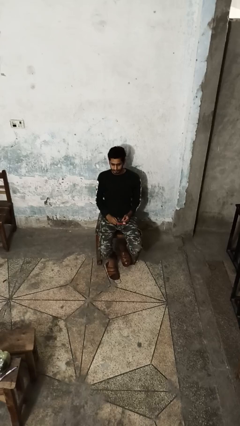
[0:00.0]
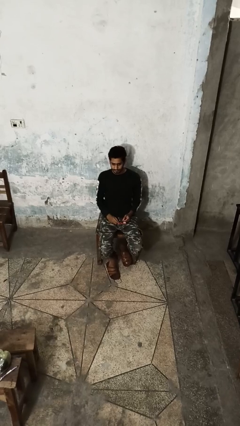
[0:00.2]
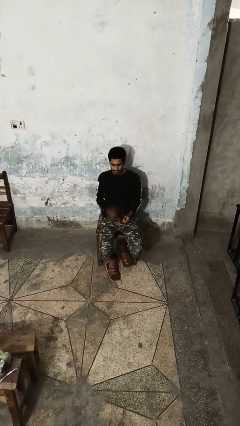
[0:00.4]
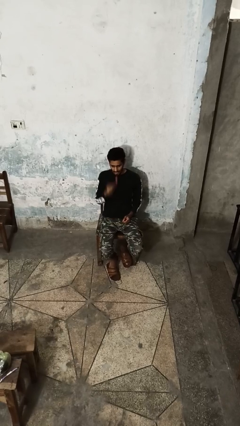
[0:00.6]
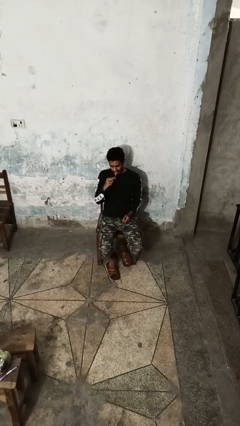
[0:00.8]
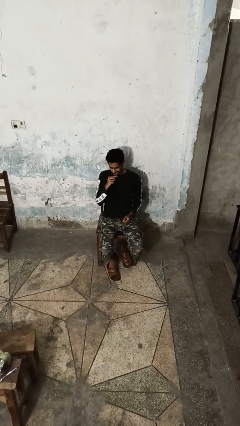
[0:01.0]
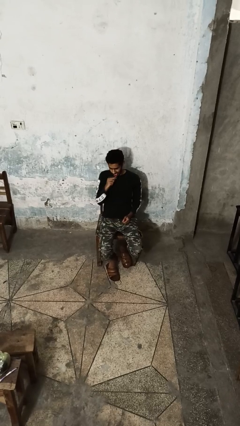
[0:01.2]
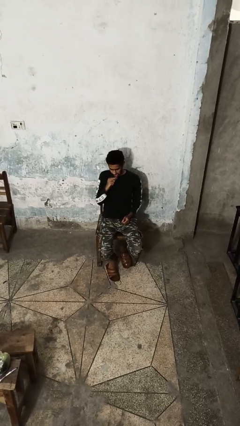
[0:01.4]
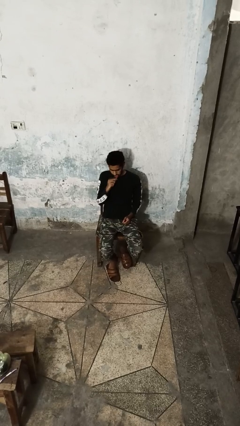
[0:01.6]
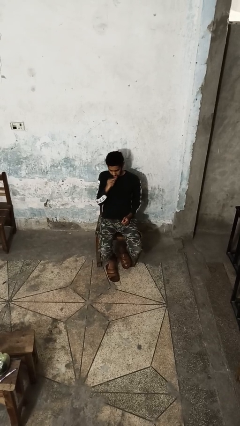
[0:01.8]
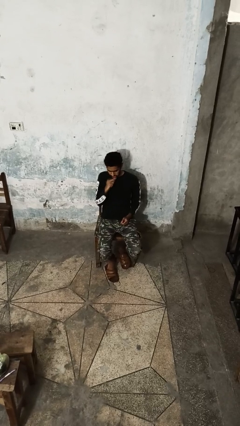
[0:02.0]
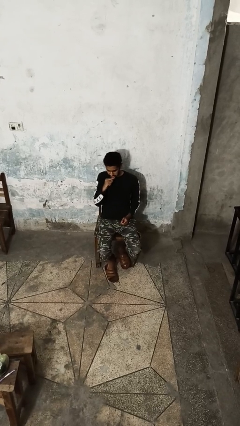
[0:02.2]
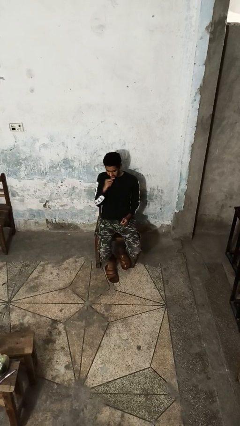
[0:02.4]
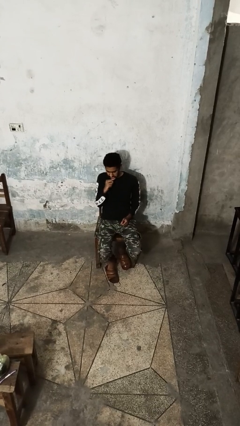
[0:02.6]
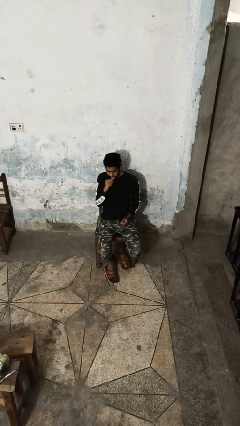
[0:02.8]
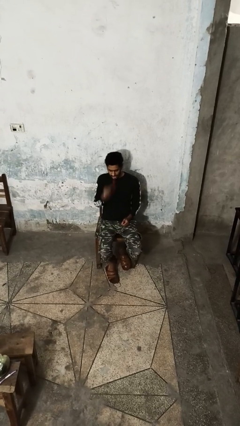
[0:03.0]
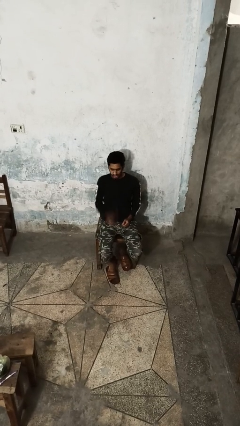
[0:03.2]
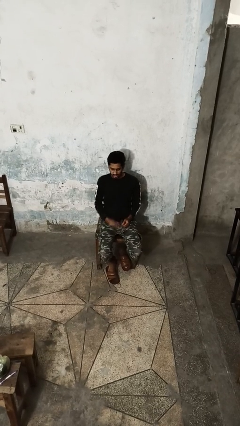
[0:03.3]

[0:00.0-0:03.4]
person brushes teeth

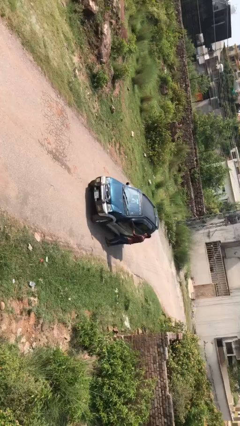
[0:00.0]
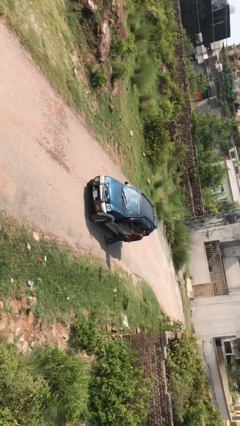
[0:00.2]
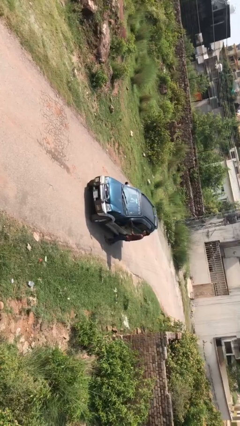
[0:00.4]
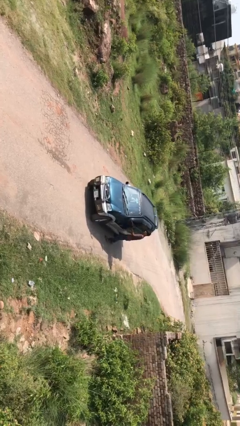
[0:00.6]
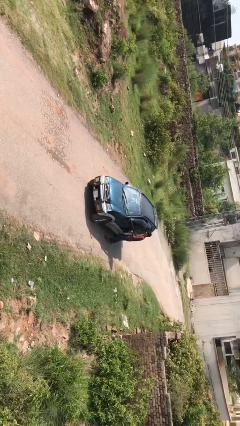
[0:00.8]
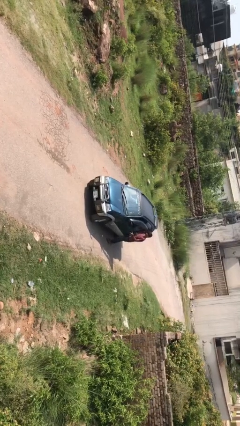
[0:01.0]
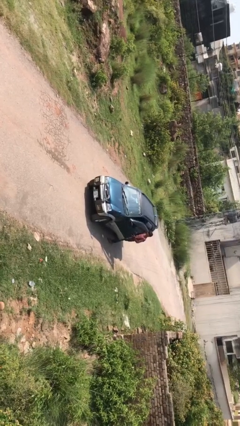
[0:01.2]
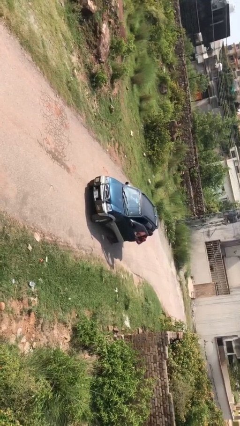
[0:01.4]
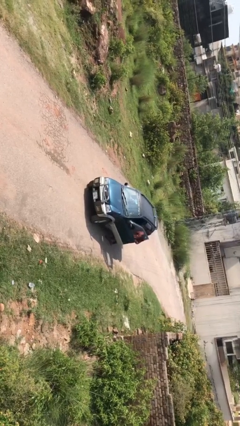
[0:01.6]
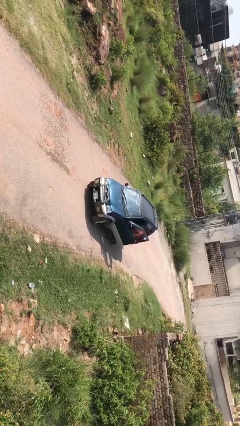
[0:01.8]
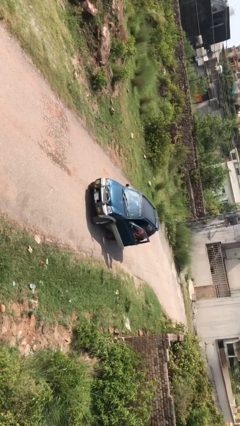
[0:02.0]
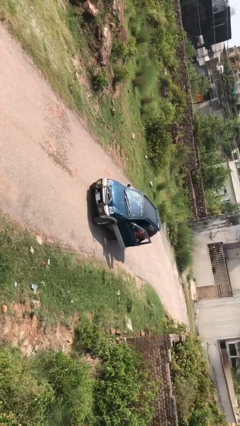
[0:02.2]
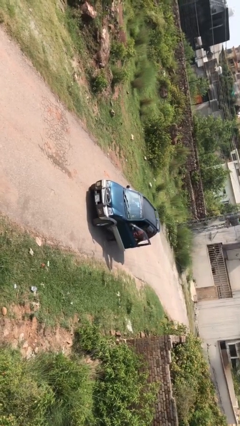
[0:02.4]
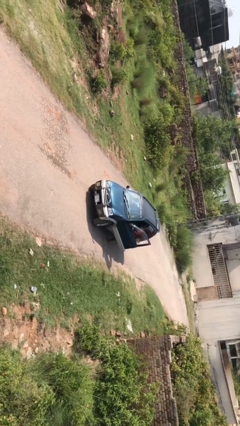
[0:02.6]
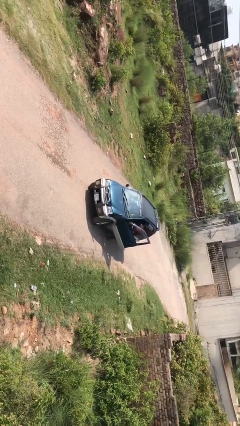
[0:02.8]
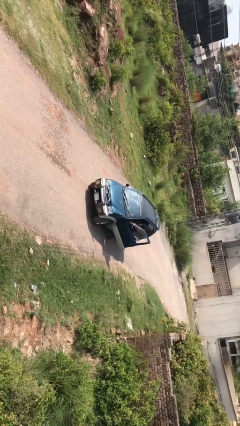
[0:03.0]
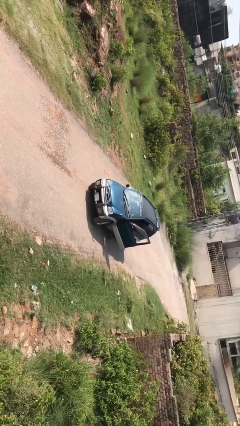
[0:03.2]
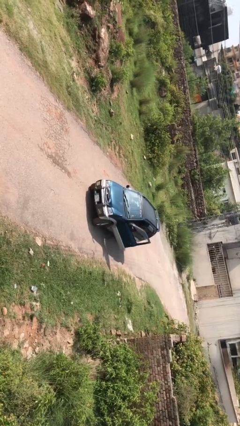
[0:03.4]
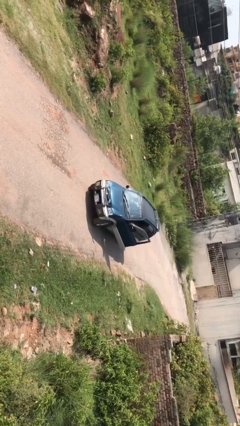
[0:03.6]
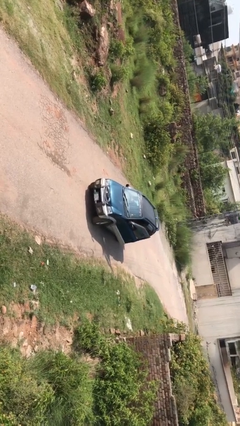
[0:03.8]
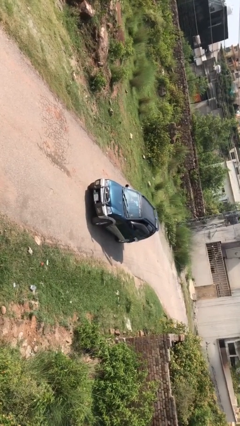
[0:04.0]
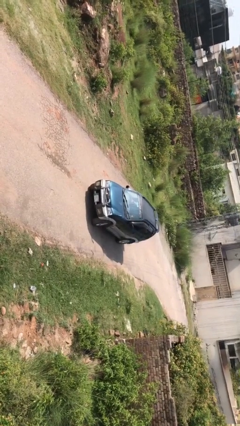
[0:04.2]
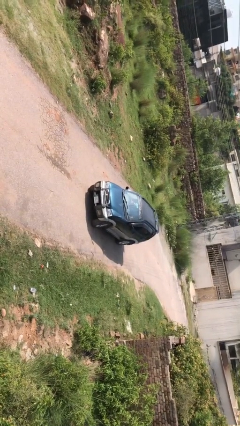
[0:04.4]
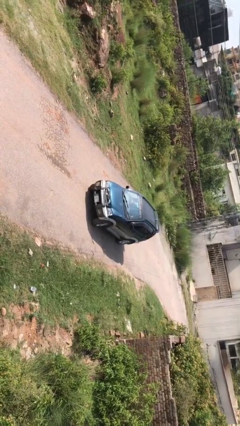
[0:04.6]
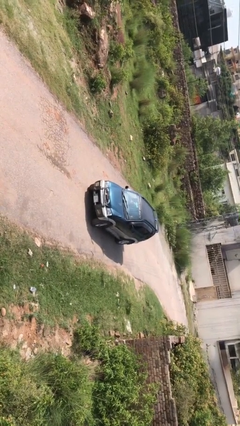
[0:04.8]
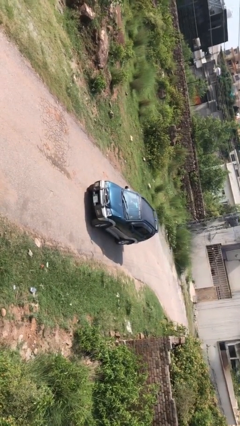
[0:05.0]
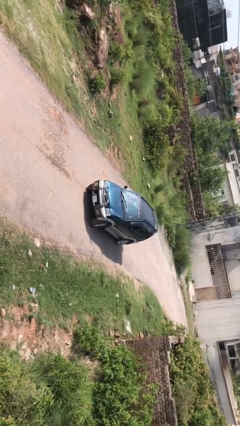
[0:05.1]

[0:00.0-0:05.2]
car picks up person

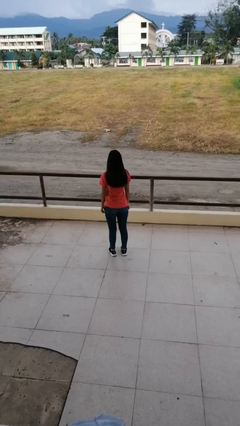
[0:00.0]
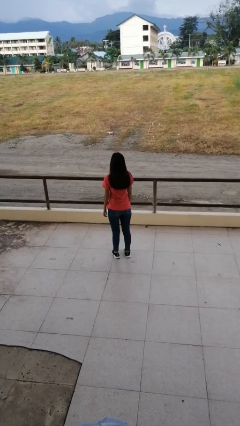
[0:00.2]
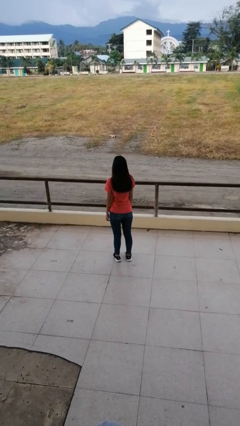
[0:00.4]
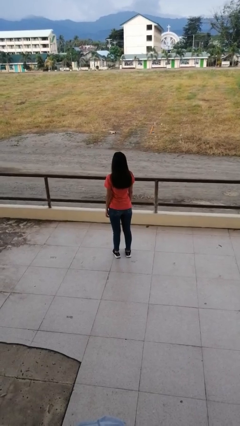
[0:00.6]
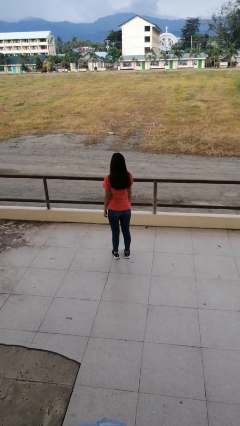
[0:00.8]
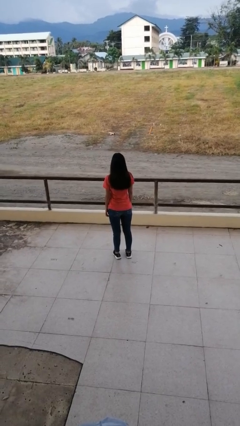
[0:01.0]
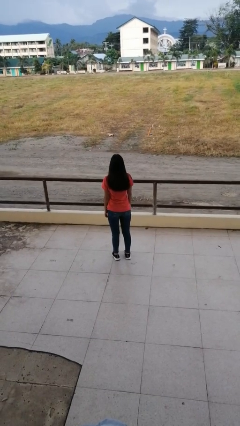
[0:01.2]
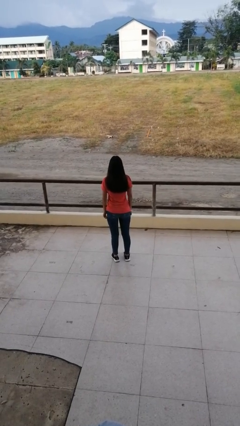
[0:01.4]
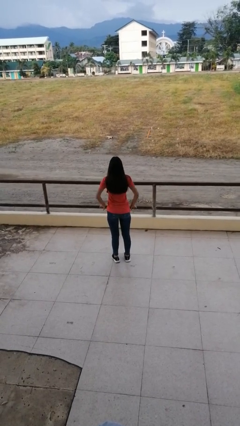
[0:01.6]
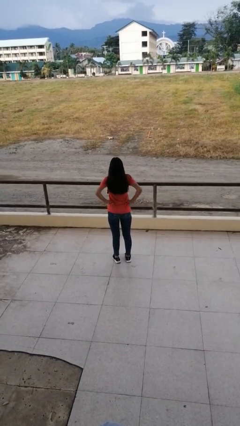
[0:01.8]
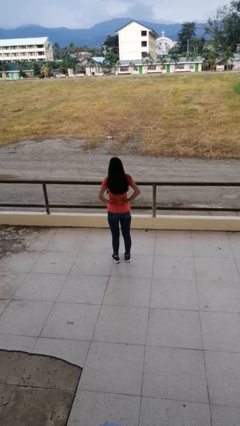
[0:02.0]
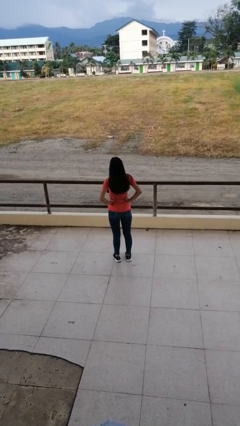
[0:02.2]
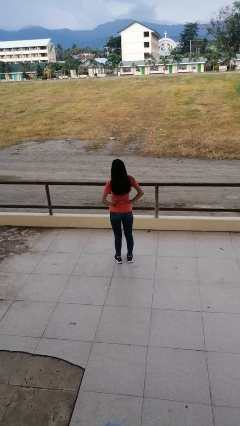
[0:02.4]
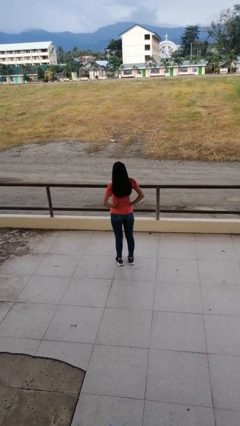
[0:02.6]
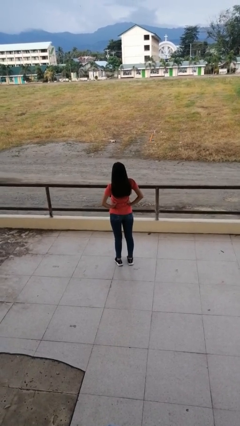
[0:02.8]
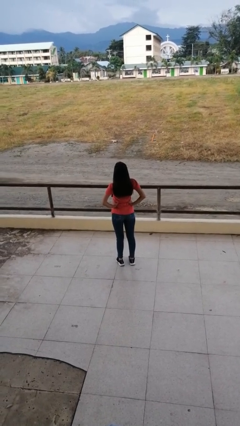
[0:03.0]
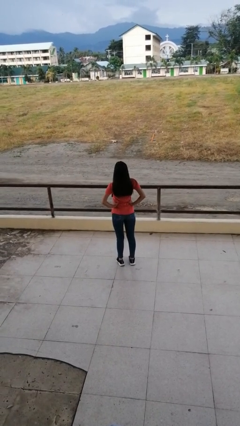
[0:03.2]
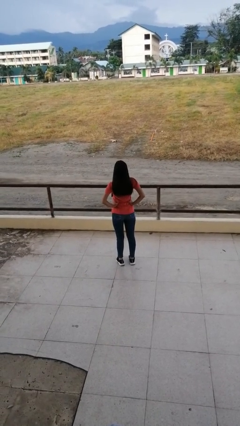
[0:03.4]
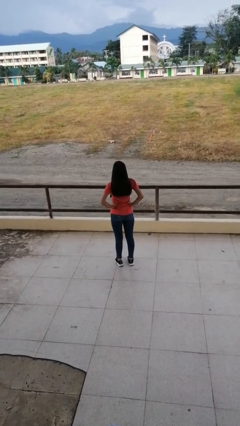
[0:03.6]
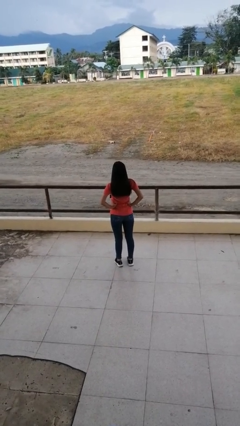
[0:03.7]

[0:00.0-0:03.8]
person stretches back

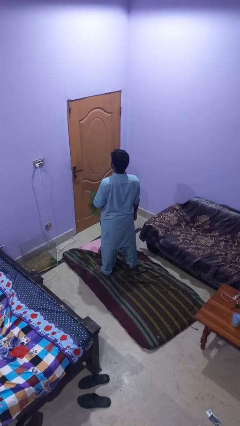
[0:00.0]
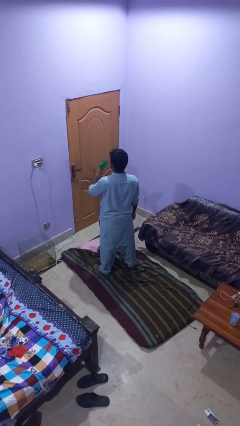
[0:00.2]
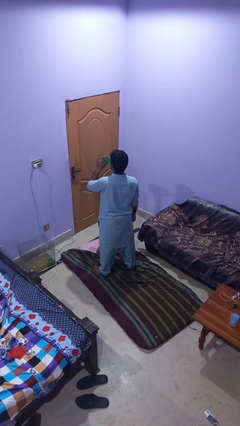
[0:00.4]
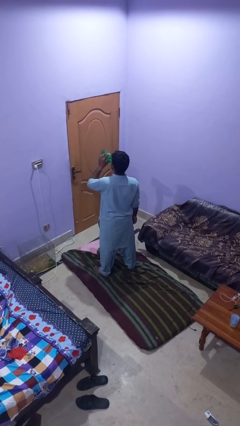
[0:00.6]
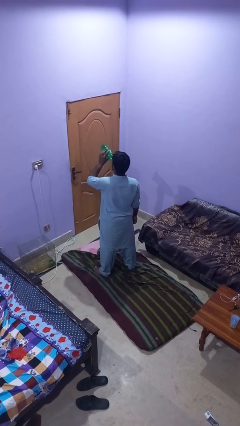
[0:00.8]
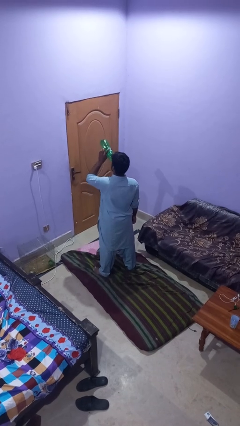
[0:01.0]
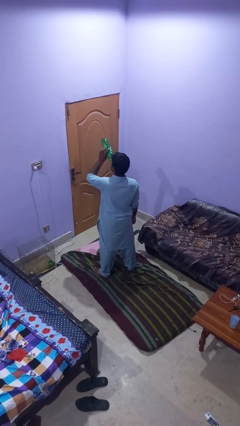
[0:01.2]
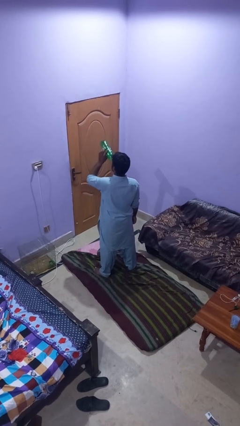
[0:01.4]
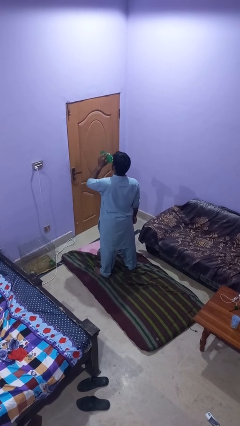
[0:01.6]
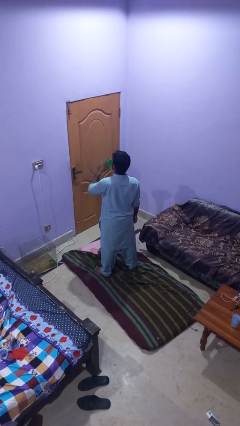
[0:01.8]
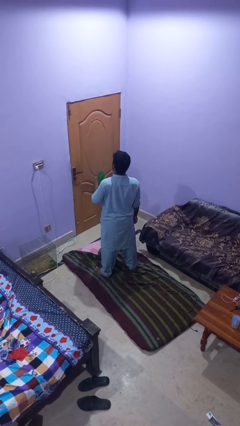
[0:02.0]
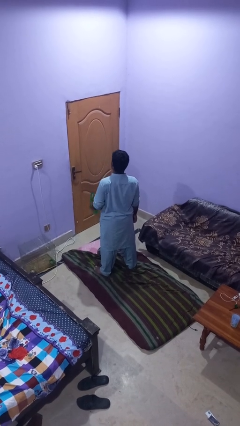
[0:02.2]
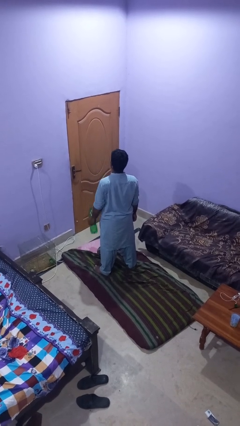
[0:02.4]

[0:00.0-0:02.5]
person drinks from bottle

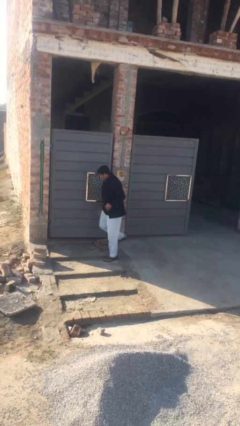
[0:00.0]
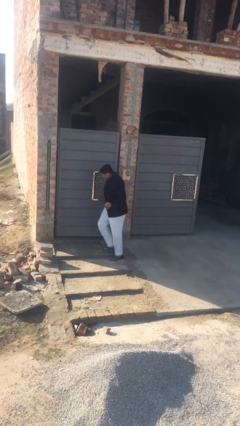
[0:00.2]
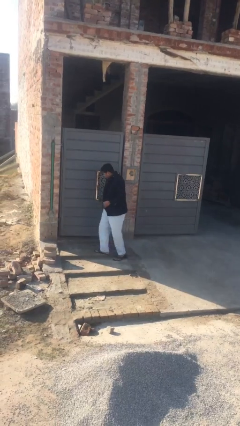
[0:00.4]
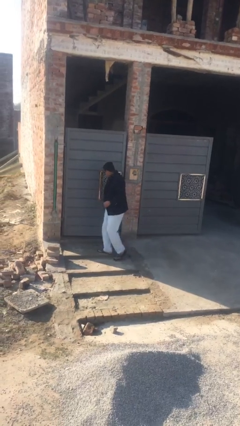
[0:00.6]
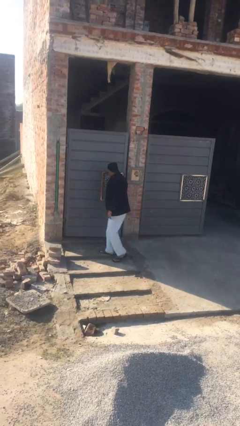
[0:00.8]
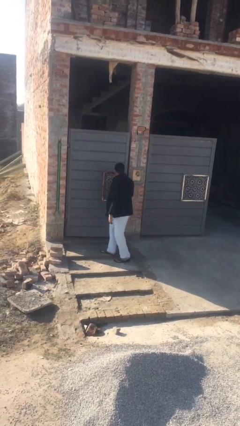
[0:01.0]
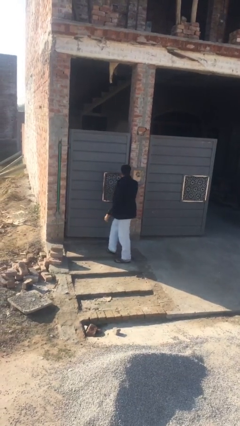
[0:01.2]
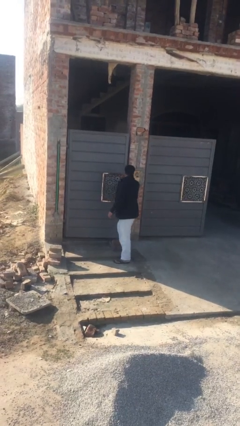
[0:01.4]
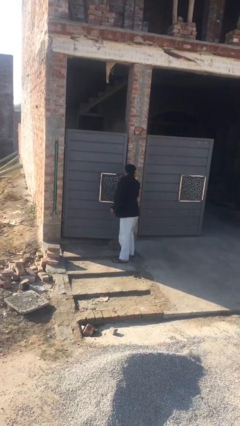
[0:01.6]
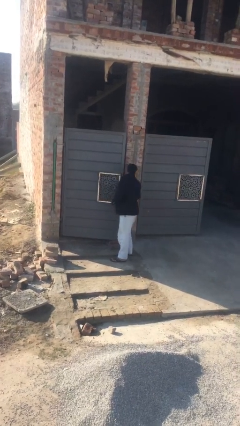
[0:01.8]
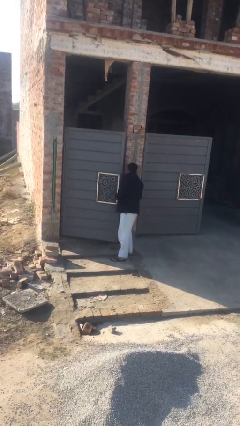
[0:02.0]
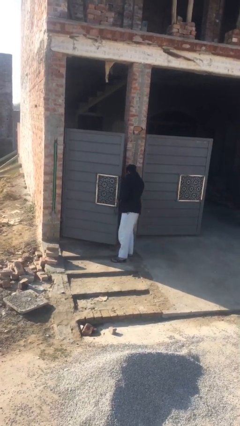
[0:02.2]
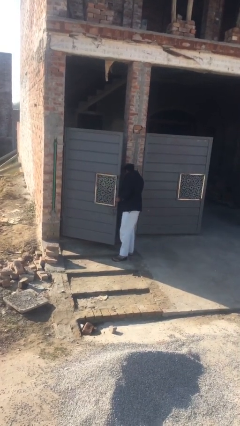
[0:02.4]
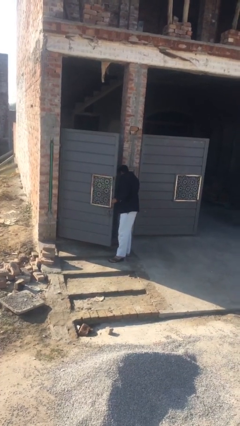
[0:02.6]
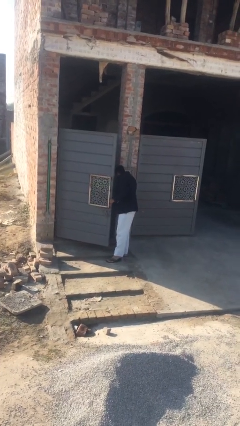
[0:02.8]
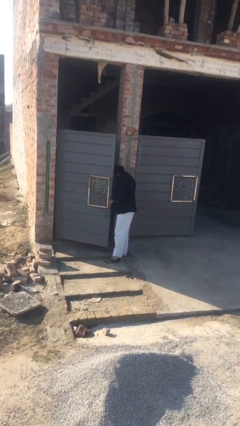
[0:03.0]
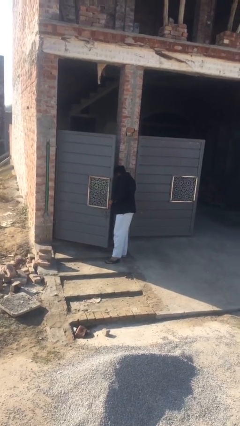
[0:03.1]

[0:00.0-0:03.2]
person opens facility door
